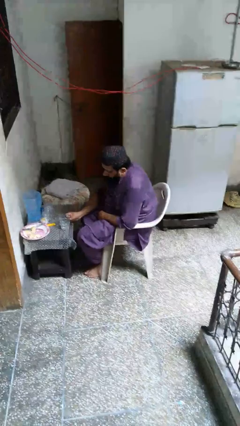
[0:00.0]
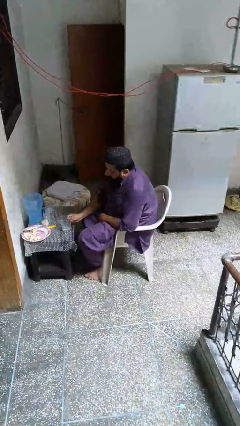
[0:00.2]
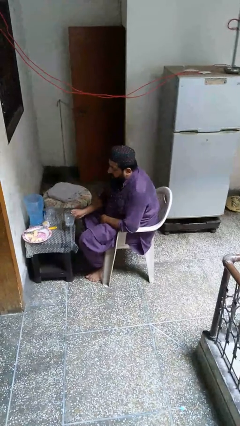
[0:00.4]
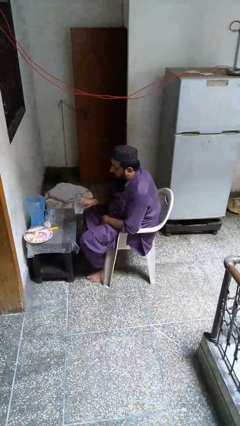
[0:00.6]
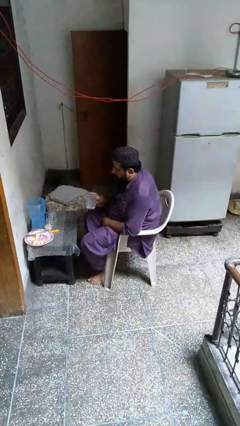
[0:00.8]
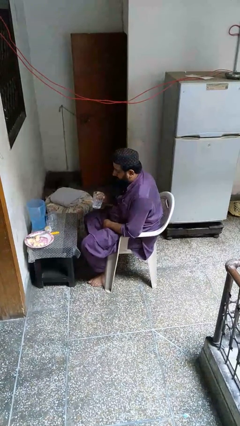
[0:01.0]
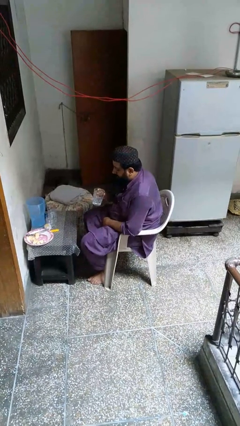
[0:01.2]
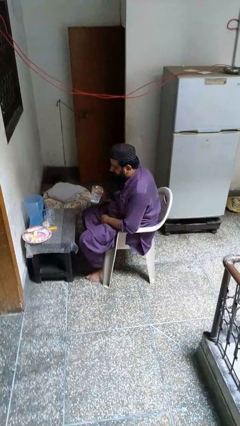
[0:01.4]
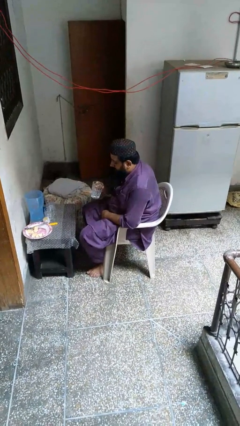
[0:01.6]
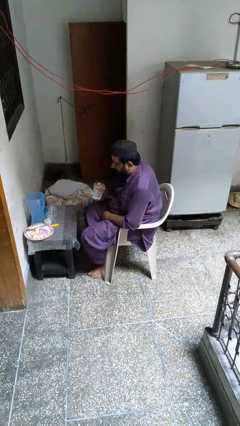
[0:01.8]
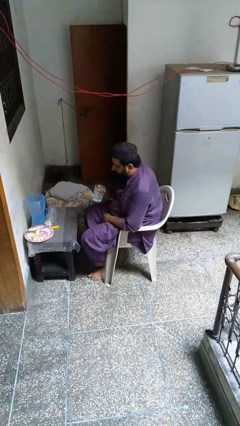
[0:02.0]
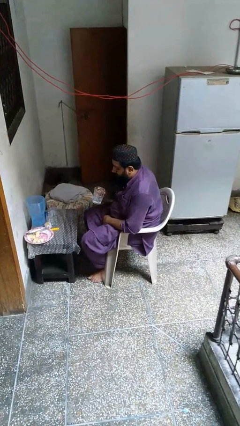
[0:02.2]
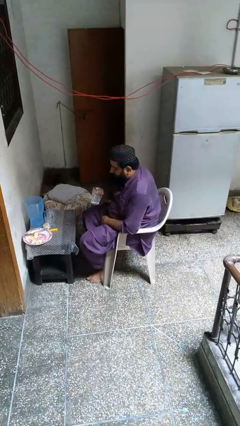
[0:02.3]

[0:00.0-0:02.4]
person picks up object from table

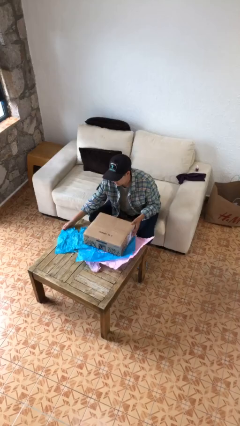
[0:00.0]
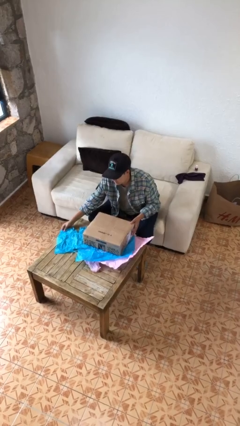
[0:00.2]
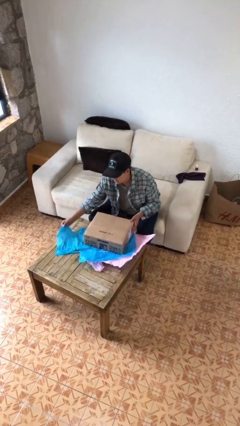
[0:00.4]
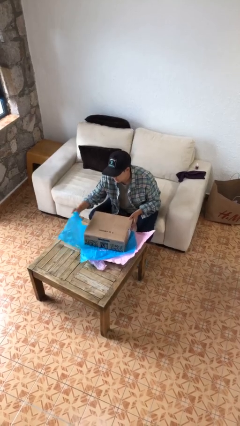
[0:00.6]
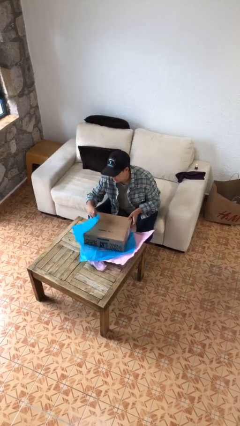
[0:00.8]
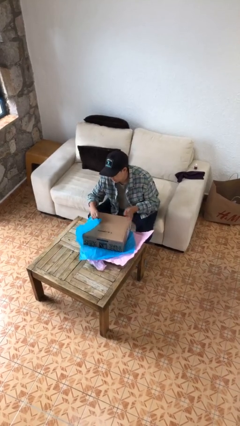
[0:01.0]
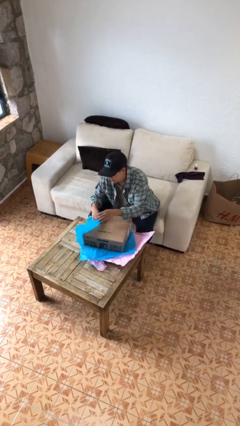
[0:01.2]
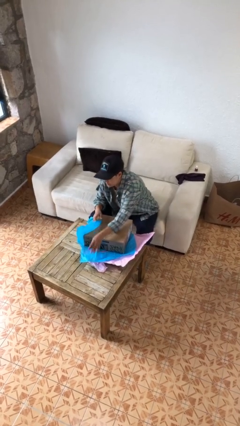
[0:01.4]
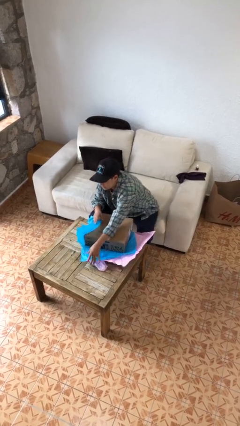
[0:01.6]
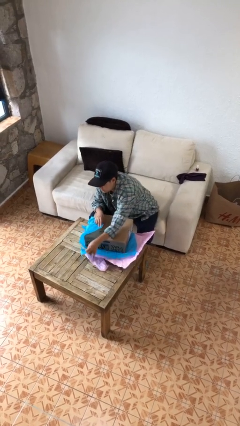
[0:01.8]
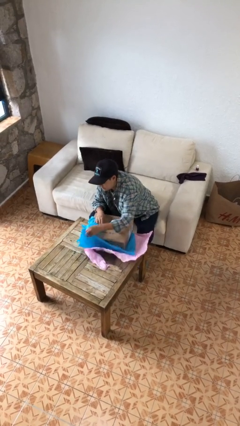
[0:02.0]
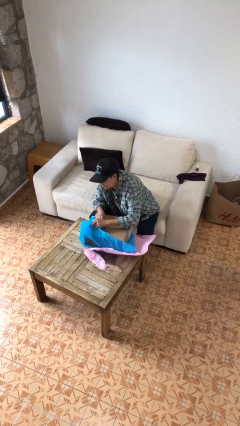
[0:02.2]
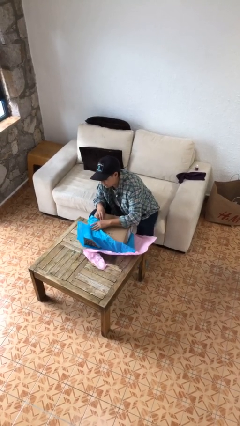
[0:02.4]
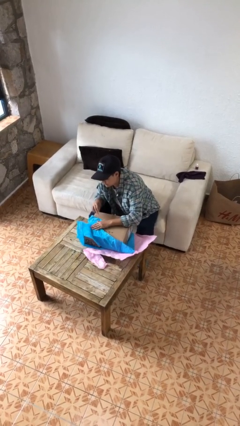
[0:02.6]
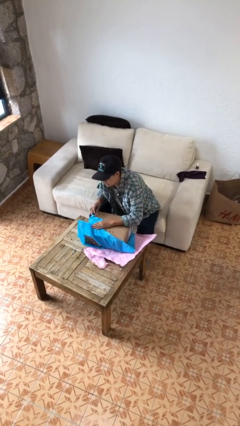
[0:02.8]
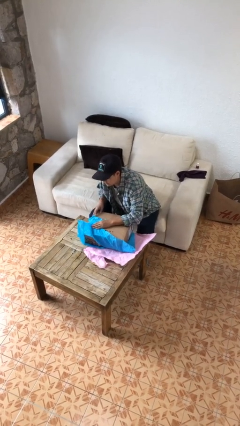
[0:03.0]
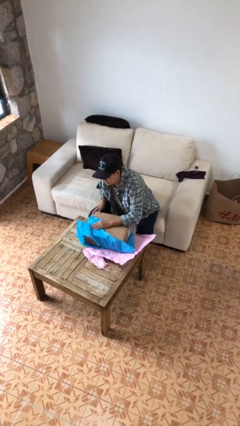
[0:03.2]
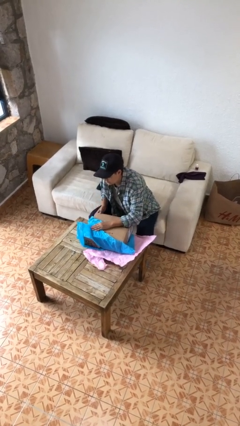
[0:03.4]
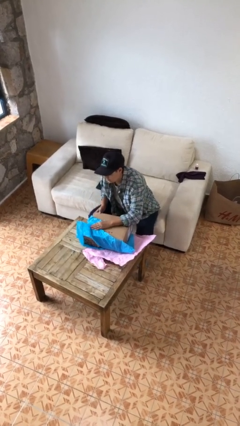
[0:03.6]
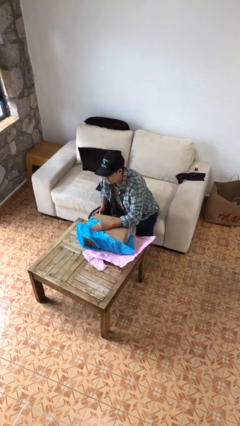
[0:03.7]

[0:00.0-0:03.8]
person wraps box

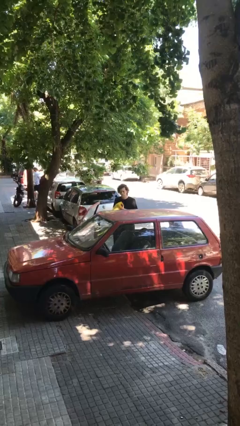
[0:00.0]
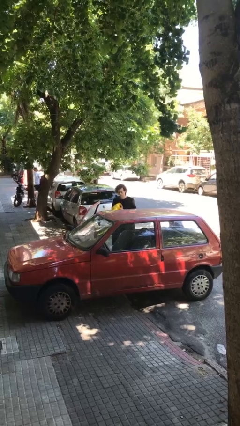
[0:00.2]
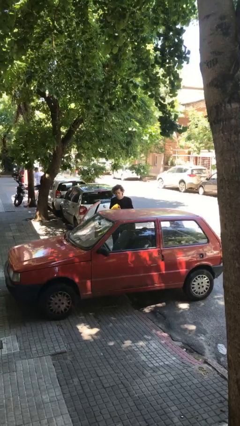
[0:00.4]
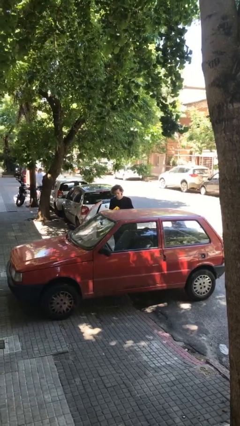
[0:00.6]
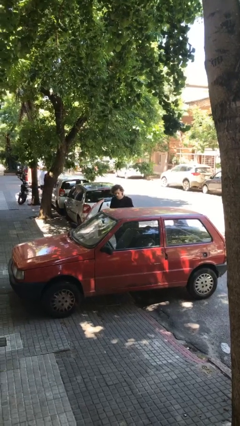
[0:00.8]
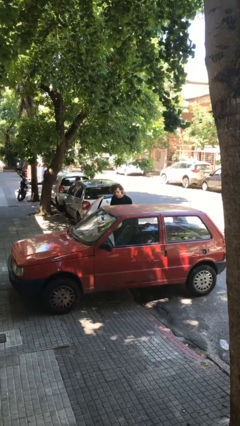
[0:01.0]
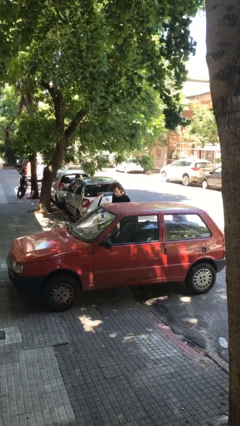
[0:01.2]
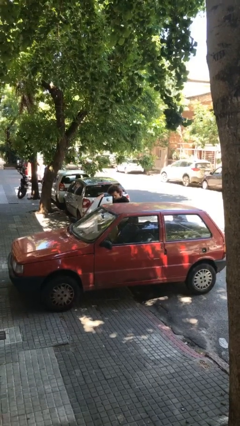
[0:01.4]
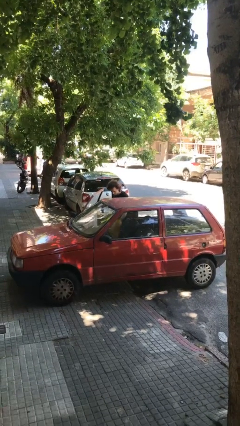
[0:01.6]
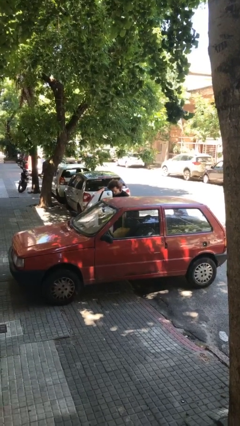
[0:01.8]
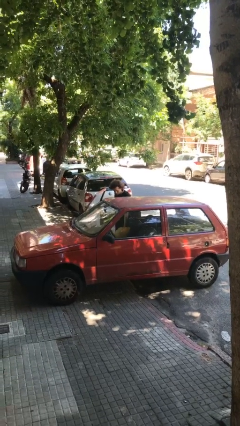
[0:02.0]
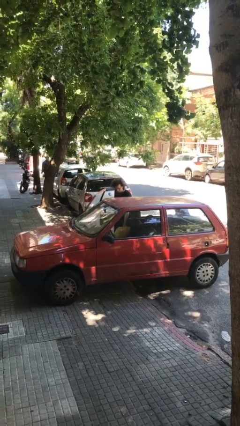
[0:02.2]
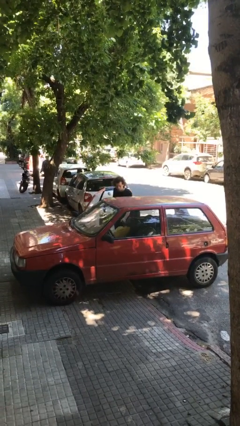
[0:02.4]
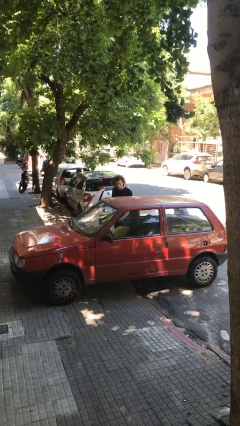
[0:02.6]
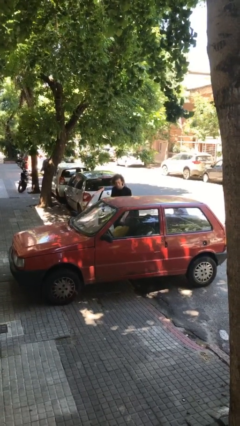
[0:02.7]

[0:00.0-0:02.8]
person loads car

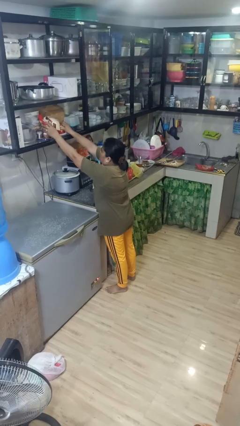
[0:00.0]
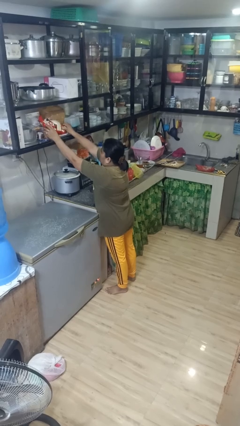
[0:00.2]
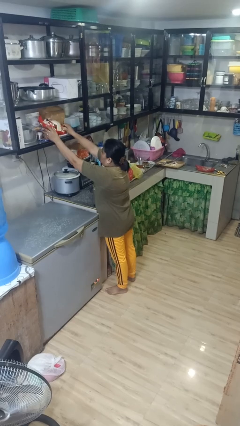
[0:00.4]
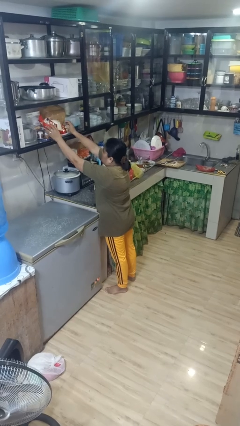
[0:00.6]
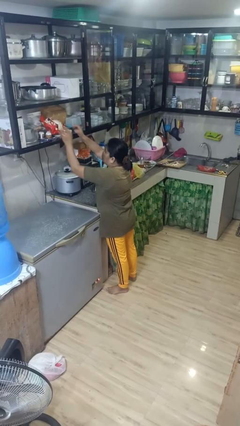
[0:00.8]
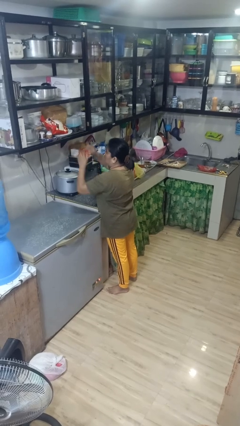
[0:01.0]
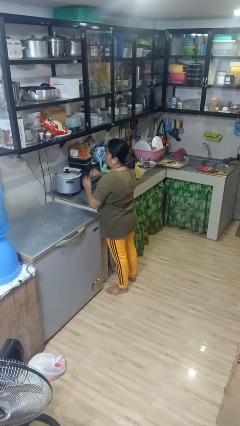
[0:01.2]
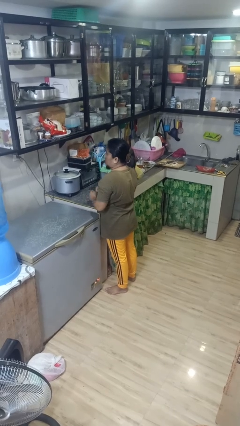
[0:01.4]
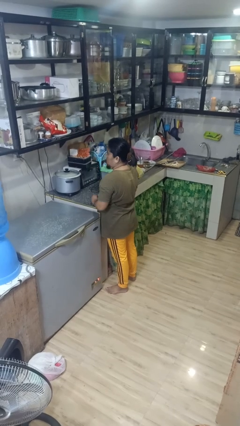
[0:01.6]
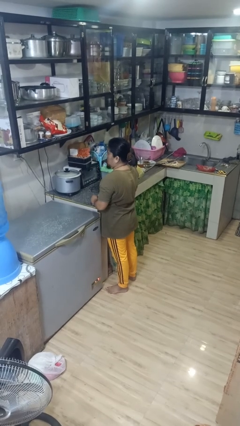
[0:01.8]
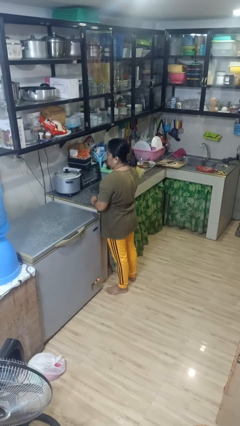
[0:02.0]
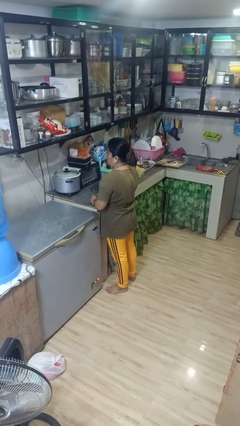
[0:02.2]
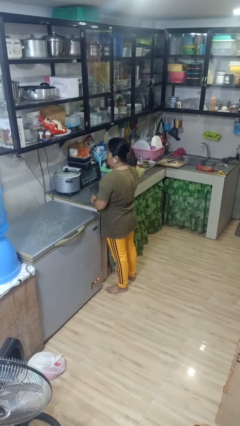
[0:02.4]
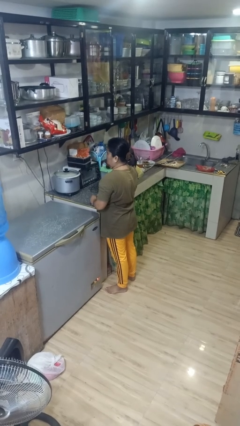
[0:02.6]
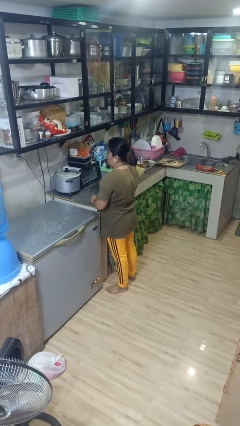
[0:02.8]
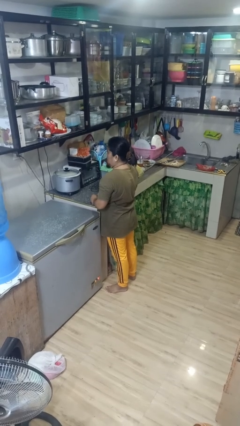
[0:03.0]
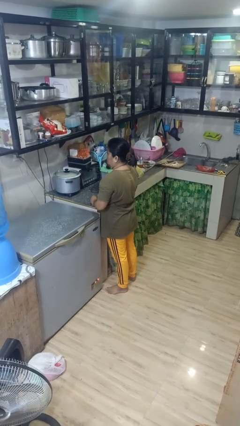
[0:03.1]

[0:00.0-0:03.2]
person puts object in cabinet

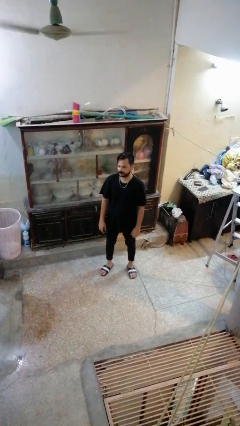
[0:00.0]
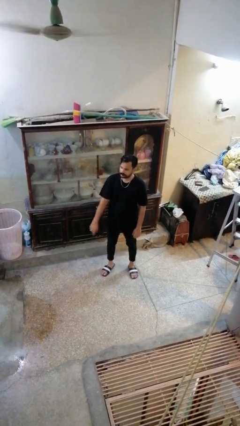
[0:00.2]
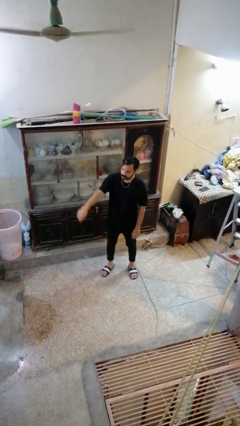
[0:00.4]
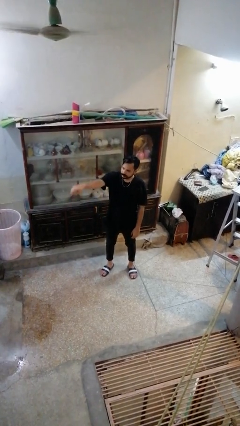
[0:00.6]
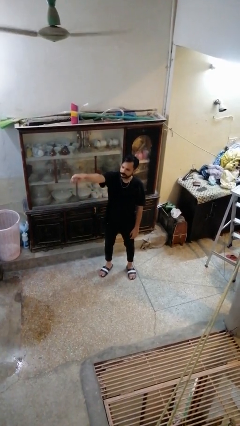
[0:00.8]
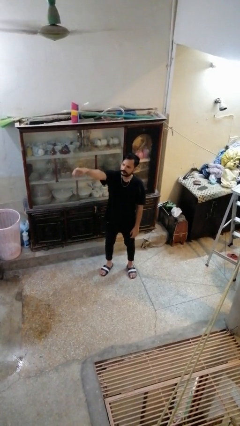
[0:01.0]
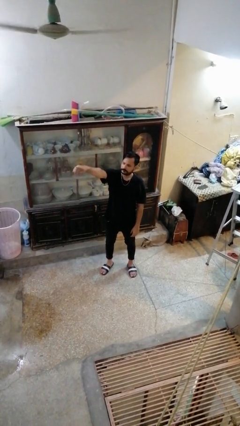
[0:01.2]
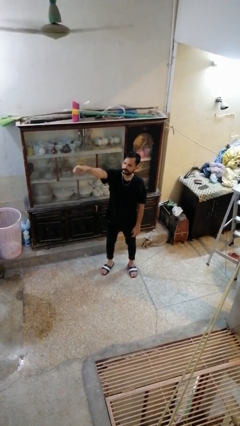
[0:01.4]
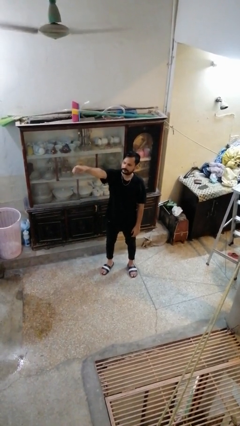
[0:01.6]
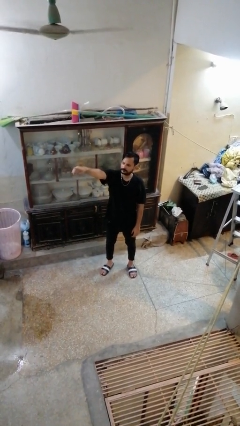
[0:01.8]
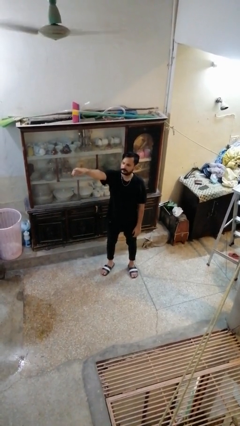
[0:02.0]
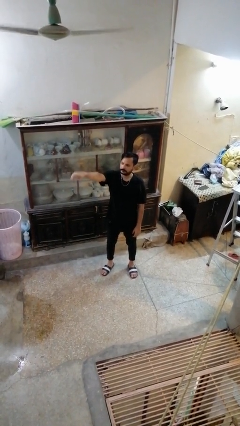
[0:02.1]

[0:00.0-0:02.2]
person points at person

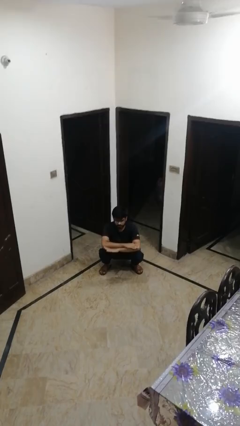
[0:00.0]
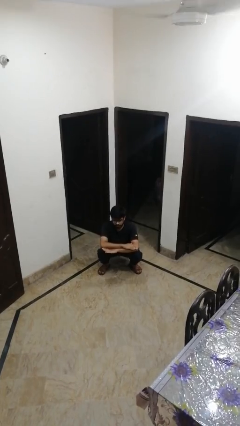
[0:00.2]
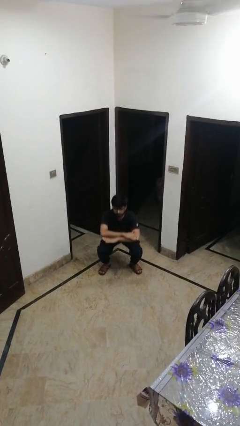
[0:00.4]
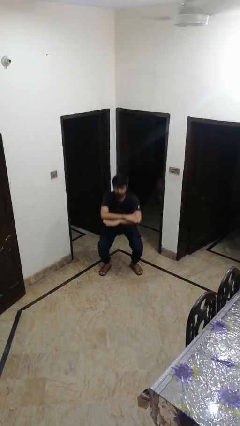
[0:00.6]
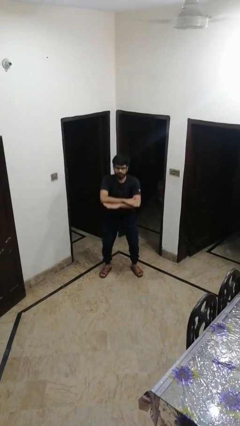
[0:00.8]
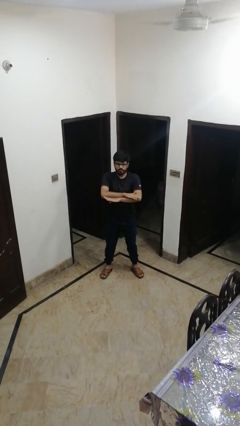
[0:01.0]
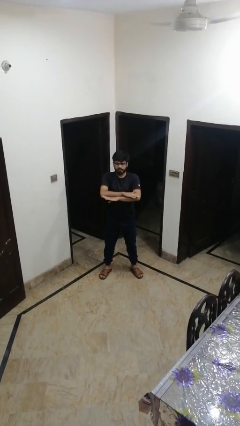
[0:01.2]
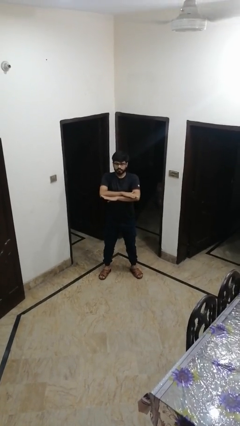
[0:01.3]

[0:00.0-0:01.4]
person stands up

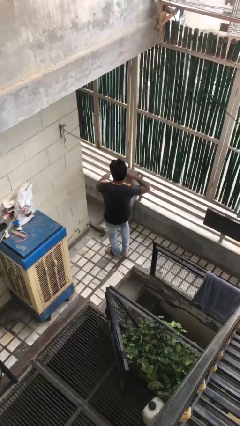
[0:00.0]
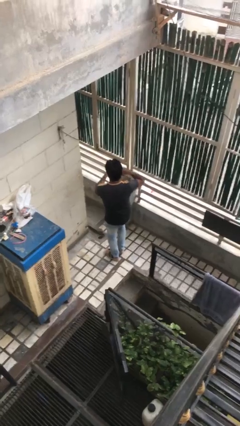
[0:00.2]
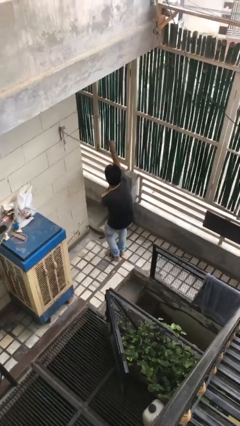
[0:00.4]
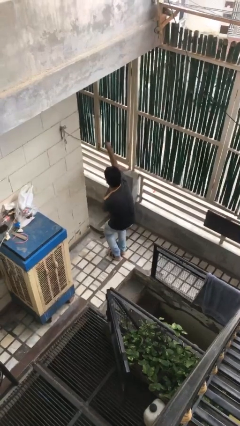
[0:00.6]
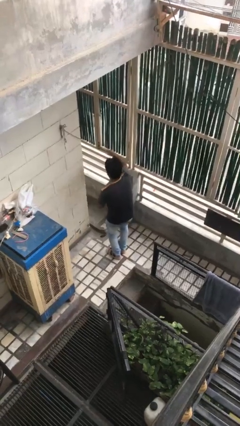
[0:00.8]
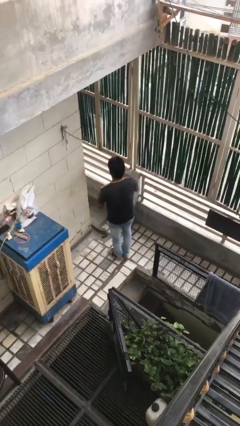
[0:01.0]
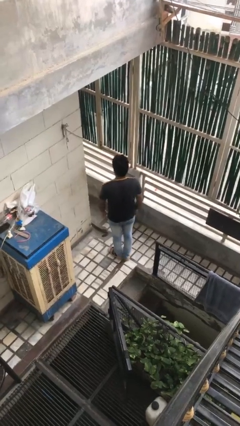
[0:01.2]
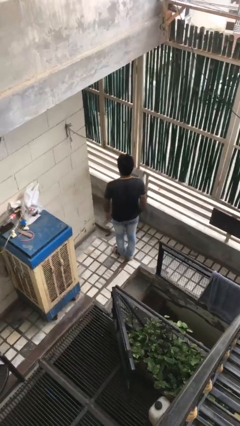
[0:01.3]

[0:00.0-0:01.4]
person karate chop
